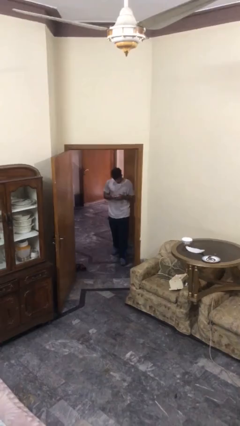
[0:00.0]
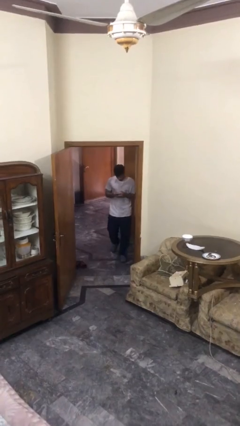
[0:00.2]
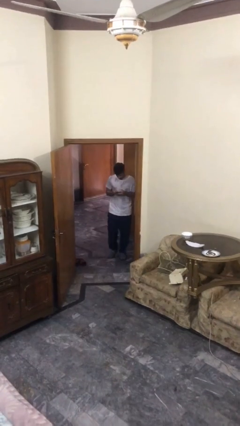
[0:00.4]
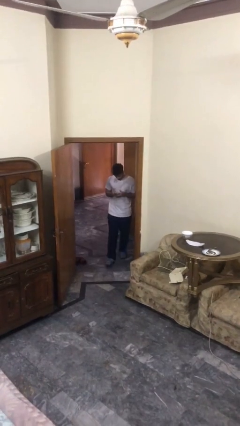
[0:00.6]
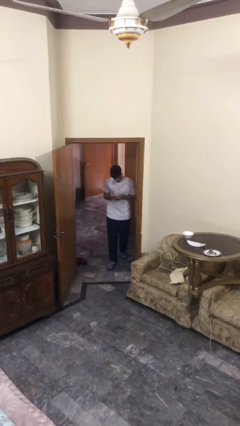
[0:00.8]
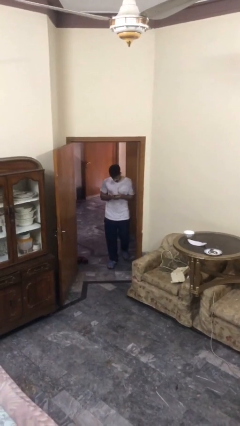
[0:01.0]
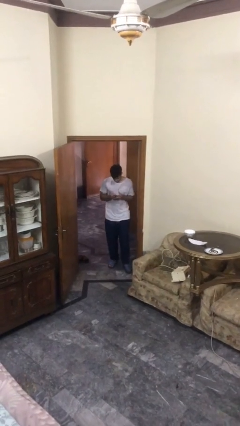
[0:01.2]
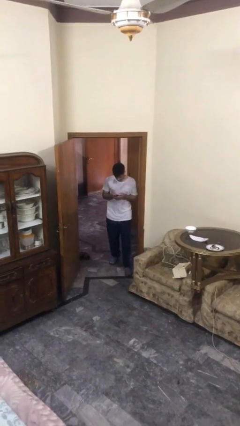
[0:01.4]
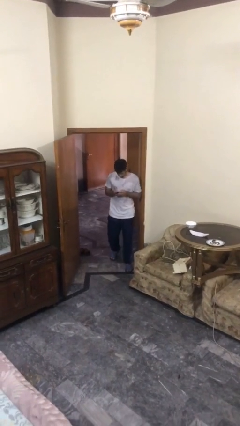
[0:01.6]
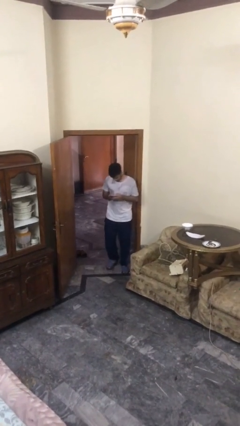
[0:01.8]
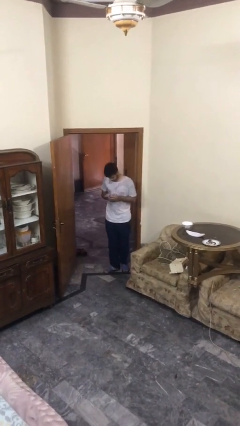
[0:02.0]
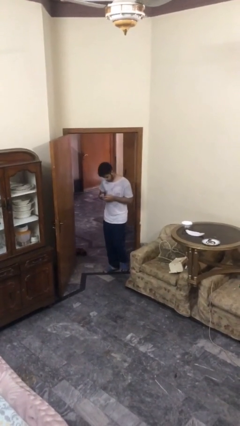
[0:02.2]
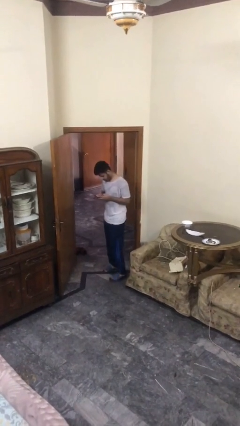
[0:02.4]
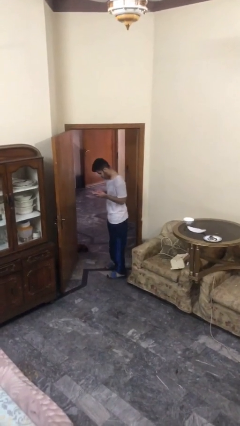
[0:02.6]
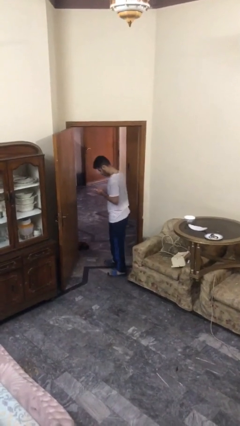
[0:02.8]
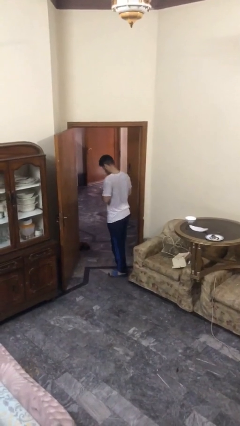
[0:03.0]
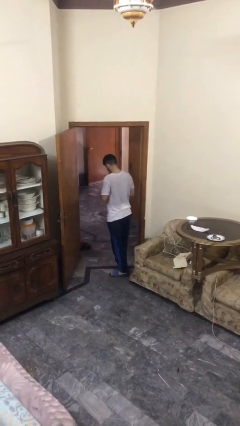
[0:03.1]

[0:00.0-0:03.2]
person enters scene through structure

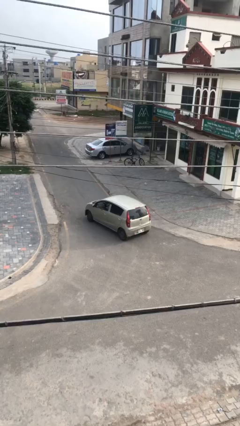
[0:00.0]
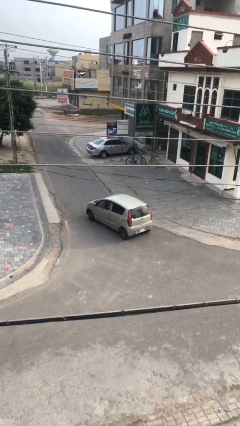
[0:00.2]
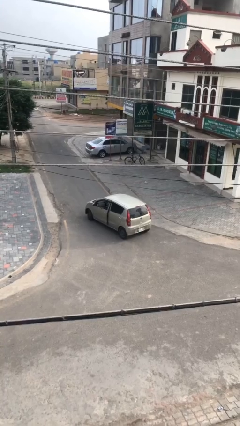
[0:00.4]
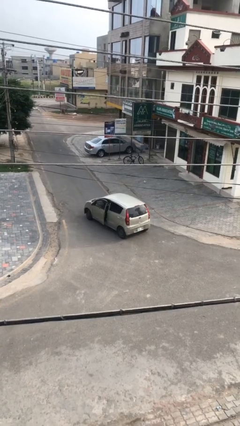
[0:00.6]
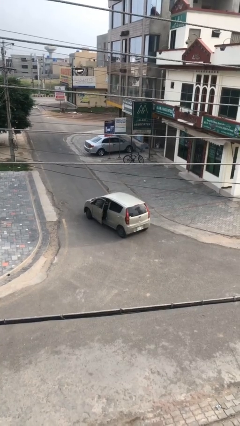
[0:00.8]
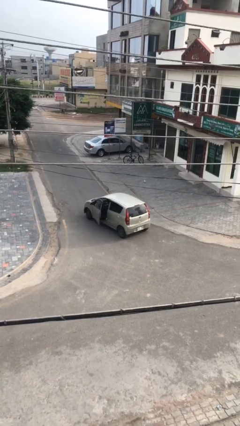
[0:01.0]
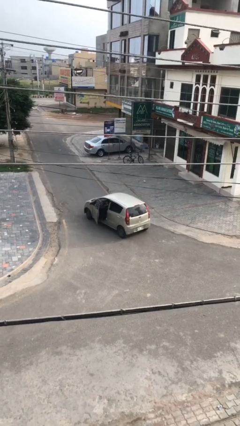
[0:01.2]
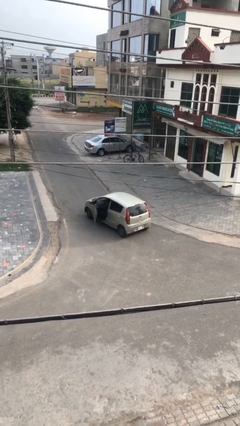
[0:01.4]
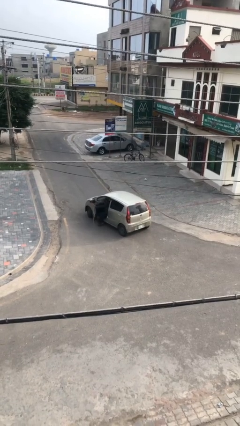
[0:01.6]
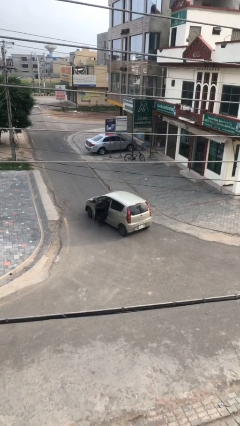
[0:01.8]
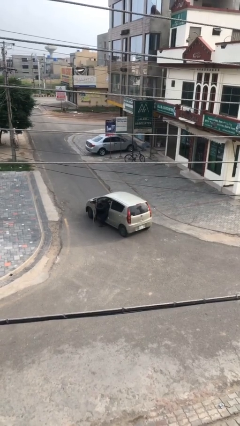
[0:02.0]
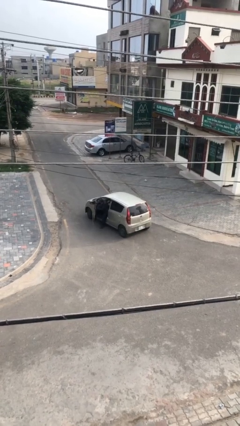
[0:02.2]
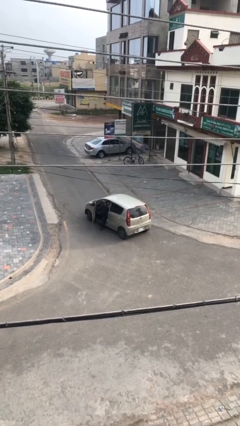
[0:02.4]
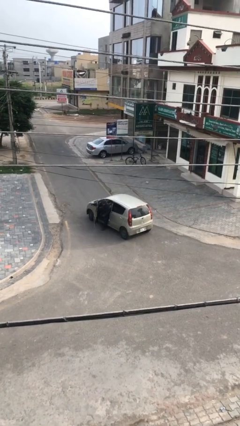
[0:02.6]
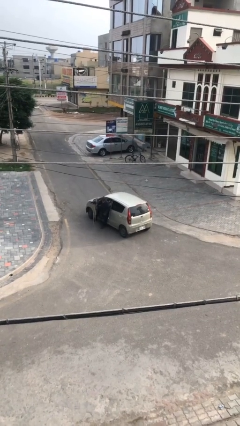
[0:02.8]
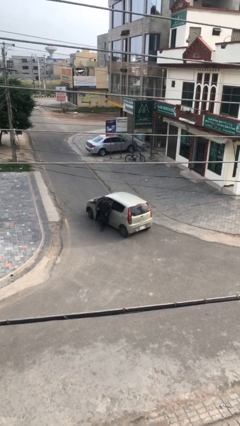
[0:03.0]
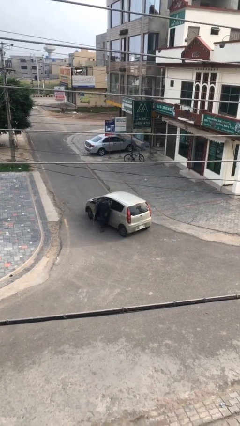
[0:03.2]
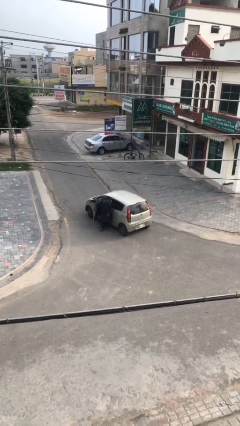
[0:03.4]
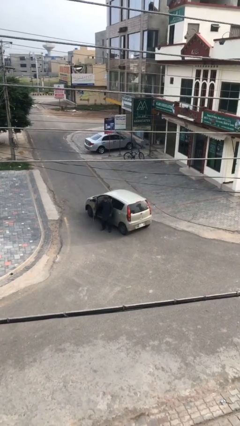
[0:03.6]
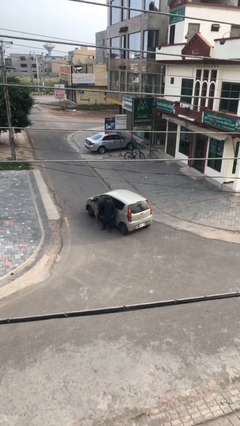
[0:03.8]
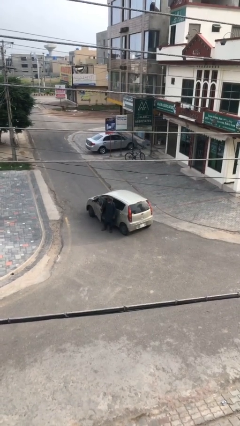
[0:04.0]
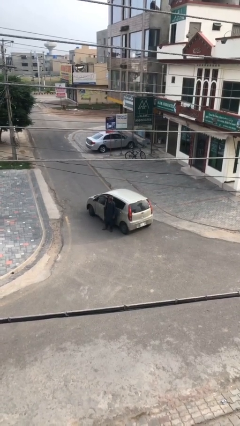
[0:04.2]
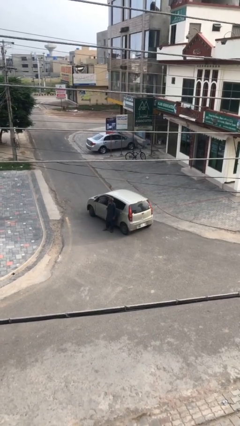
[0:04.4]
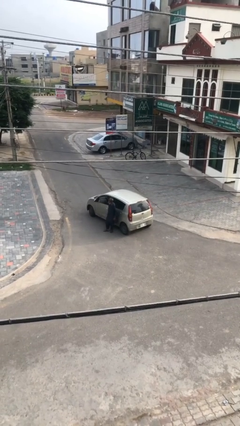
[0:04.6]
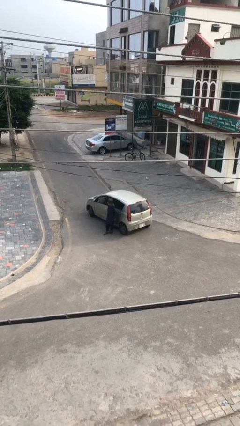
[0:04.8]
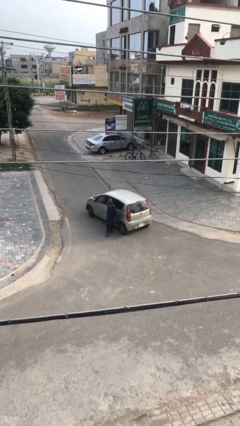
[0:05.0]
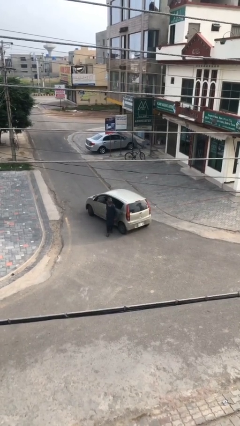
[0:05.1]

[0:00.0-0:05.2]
car drops off person

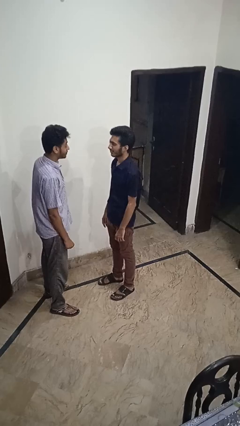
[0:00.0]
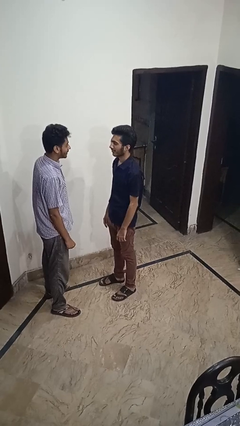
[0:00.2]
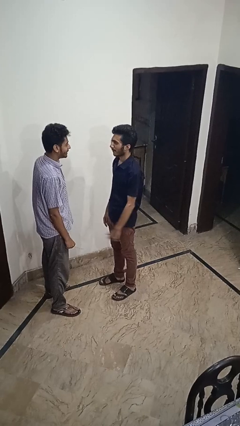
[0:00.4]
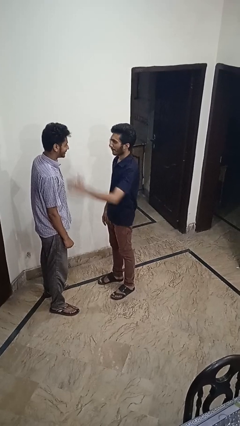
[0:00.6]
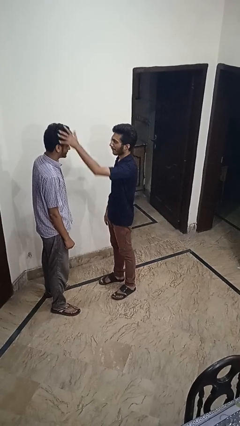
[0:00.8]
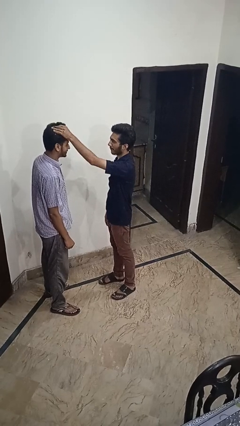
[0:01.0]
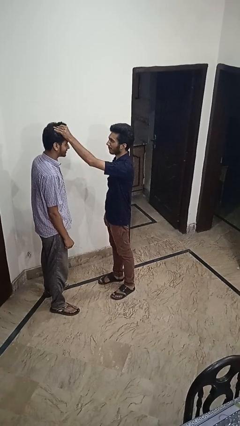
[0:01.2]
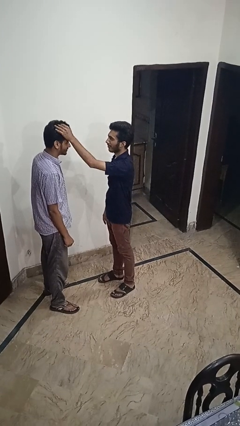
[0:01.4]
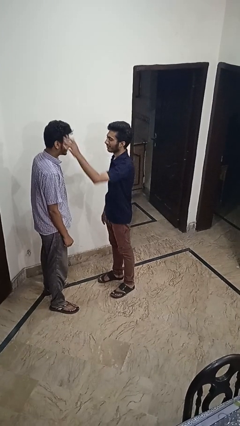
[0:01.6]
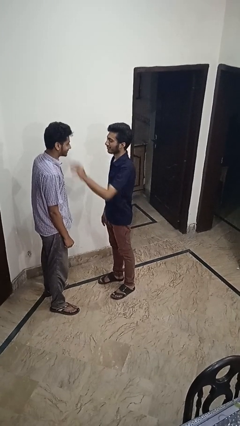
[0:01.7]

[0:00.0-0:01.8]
person grabs person by hair

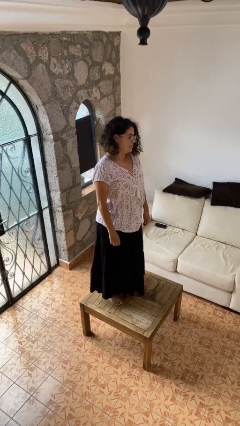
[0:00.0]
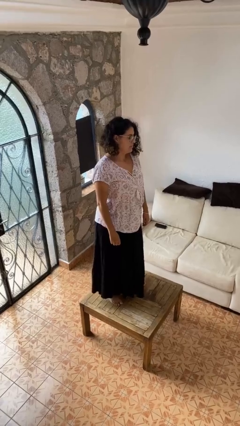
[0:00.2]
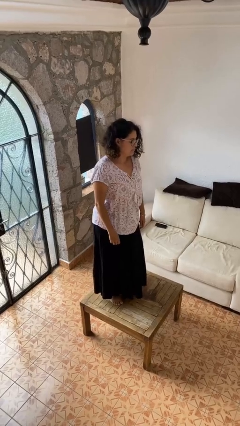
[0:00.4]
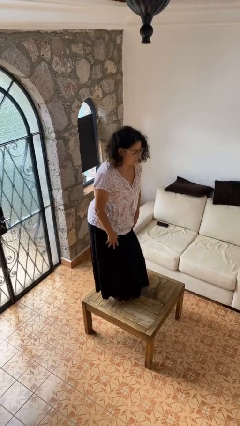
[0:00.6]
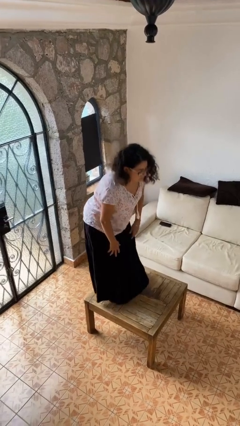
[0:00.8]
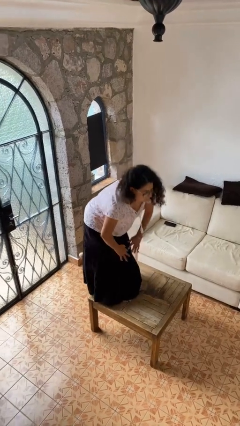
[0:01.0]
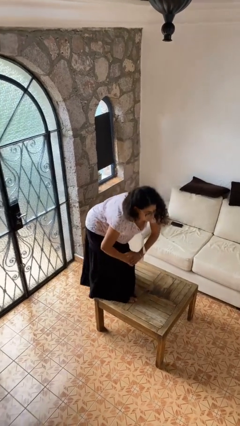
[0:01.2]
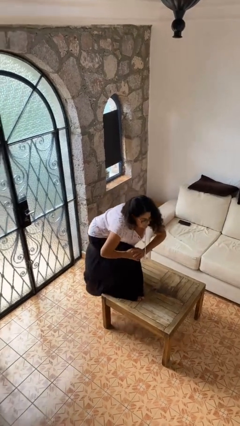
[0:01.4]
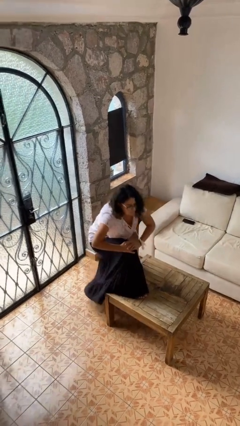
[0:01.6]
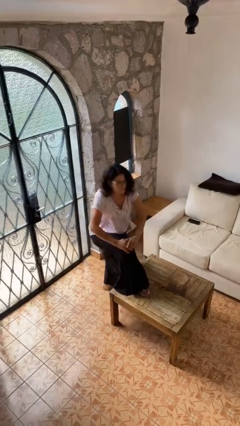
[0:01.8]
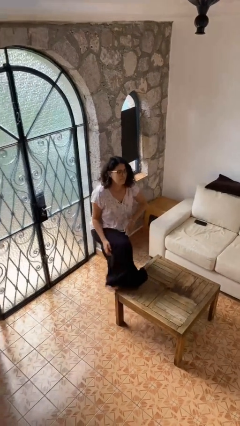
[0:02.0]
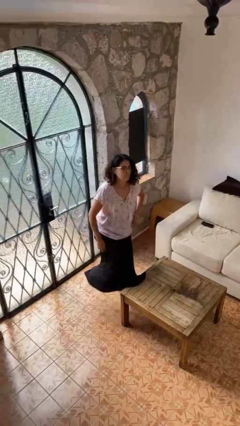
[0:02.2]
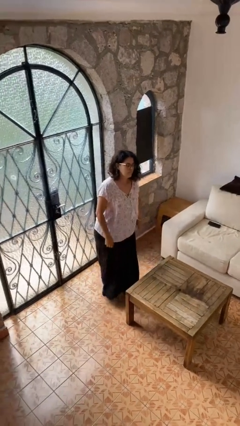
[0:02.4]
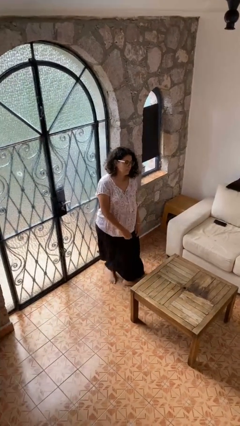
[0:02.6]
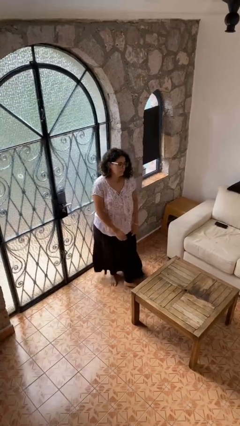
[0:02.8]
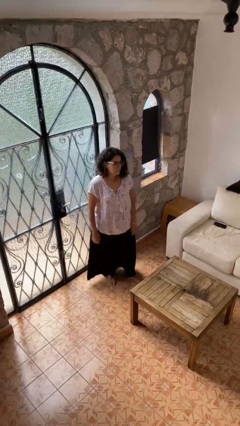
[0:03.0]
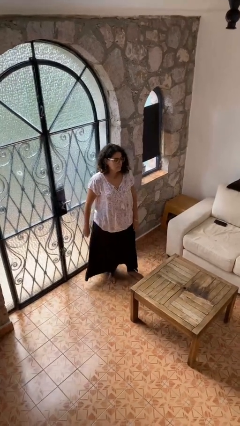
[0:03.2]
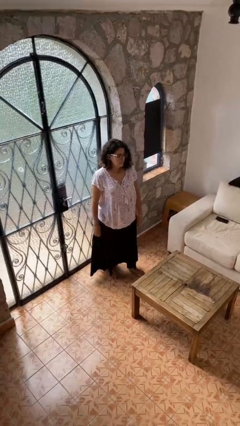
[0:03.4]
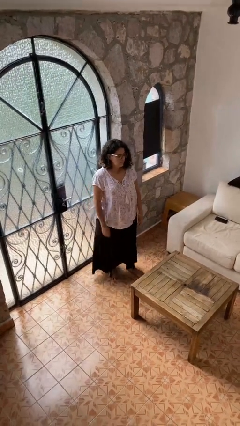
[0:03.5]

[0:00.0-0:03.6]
person climbs off table

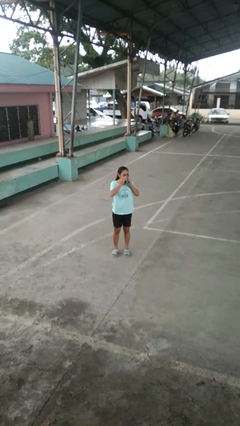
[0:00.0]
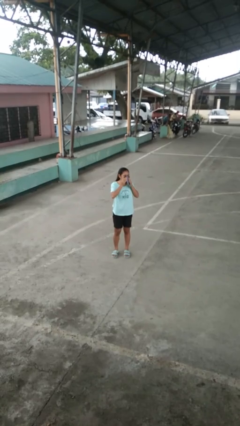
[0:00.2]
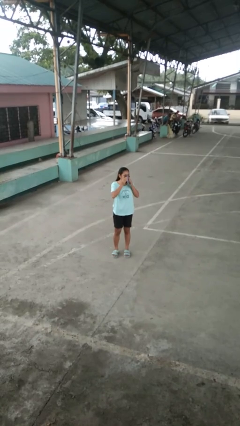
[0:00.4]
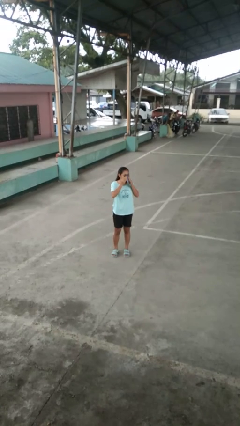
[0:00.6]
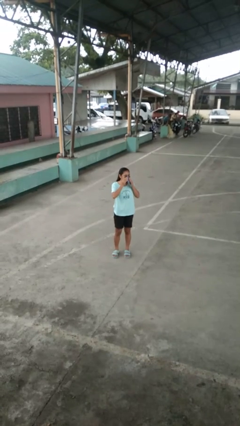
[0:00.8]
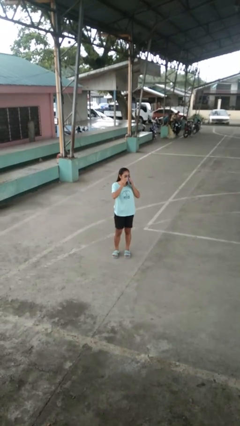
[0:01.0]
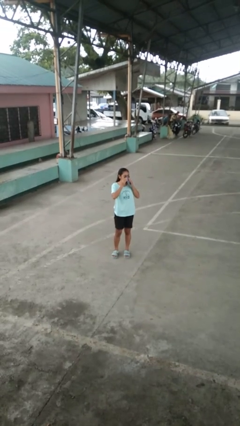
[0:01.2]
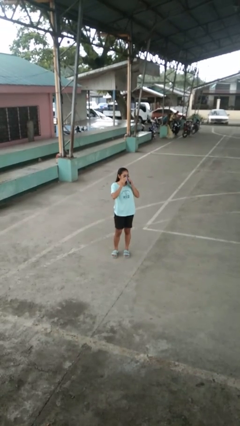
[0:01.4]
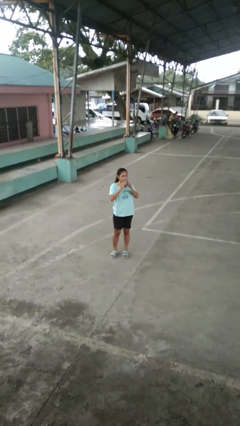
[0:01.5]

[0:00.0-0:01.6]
person blows nose

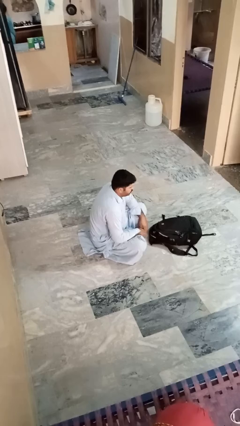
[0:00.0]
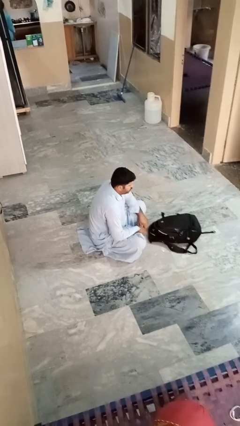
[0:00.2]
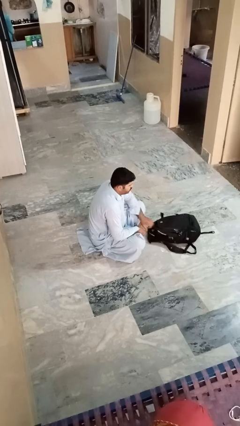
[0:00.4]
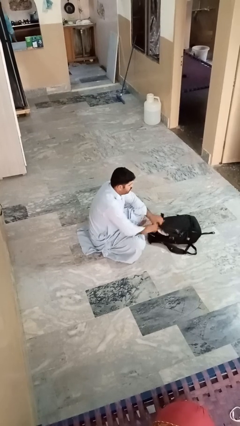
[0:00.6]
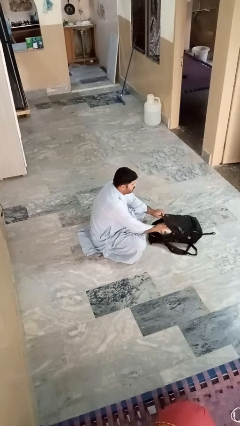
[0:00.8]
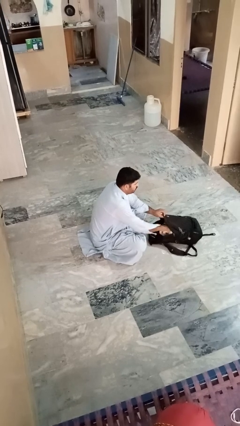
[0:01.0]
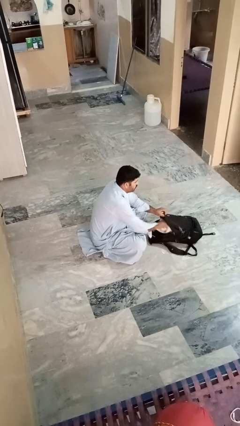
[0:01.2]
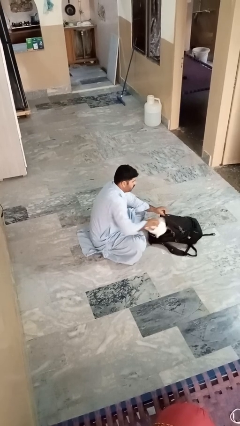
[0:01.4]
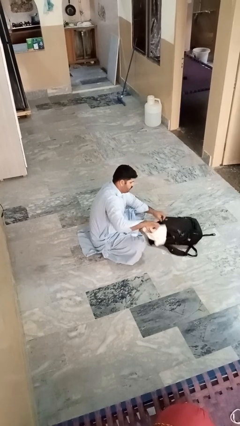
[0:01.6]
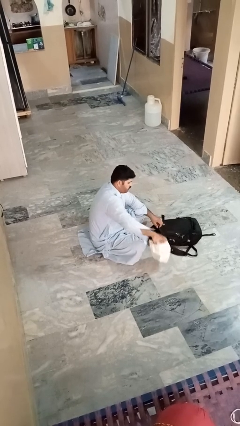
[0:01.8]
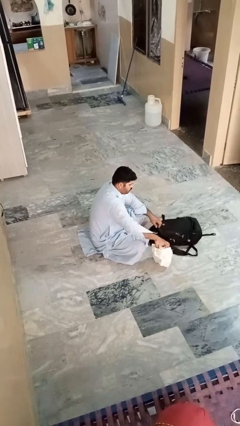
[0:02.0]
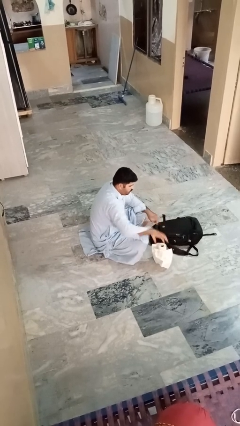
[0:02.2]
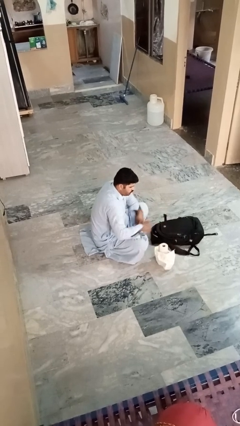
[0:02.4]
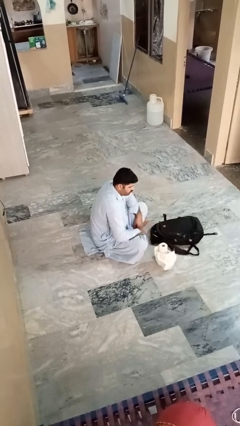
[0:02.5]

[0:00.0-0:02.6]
person takes object from bag
